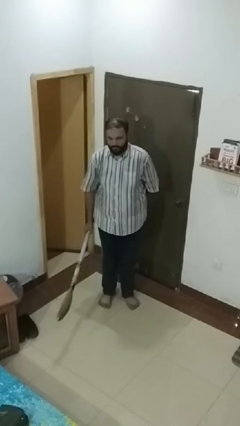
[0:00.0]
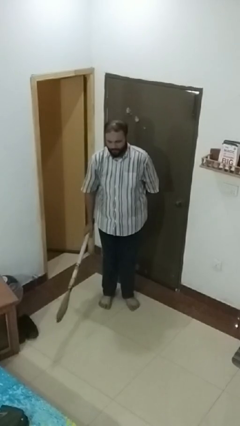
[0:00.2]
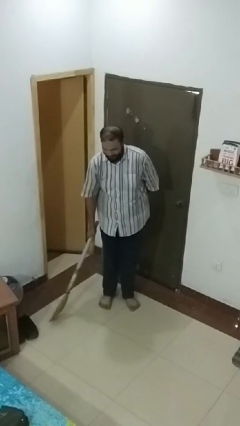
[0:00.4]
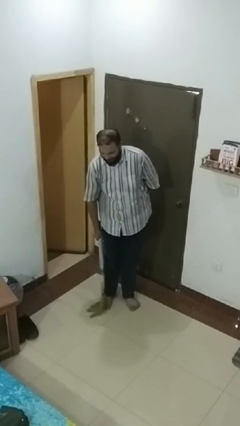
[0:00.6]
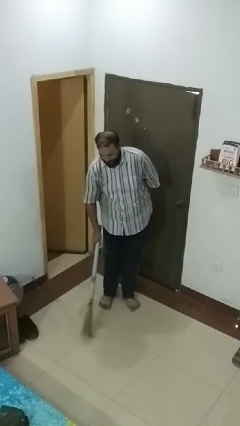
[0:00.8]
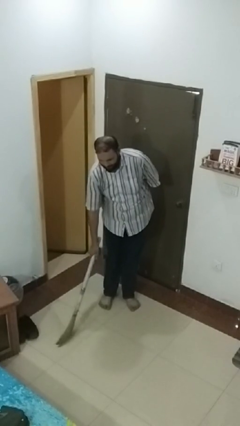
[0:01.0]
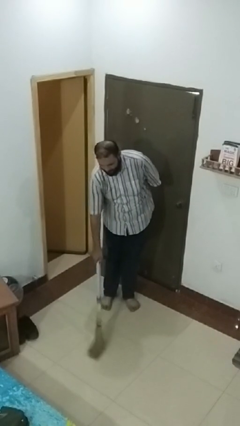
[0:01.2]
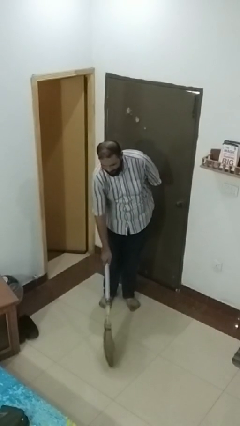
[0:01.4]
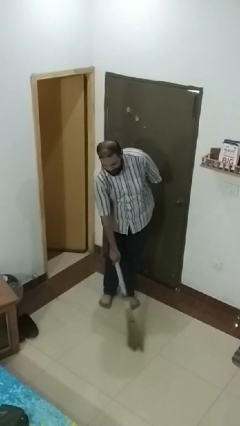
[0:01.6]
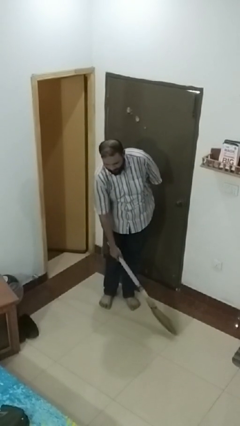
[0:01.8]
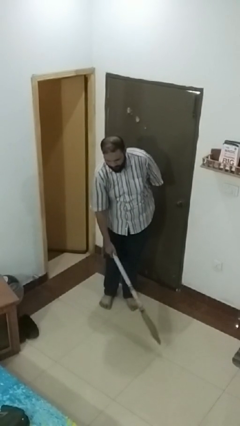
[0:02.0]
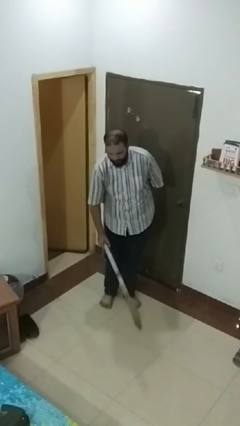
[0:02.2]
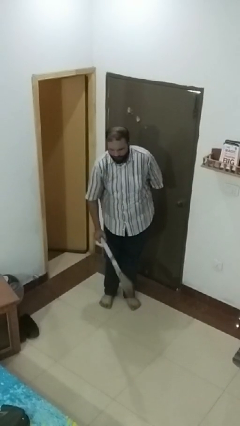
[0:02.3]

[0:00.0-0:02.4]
person sweeps floor

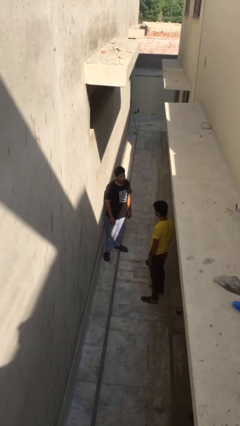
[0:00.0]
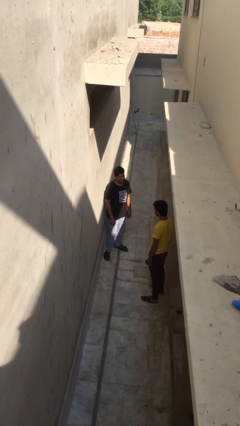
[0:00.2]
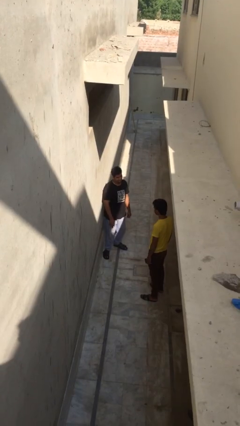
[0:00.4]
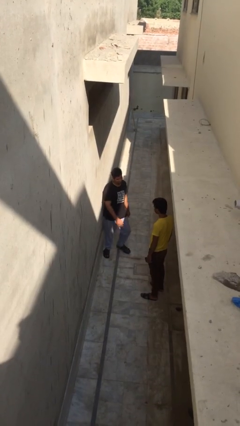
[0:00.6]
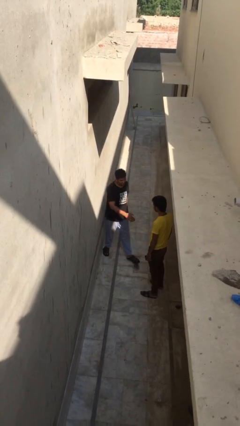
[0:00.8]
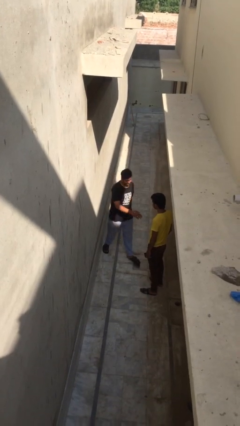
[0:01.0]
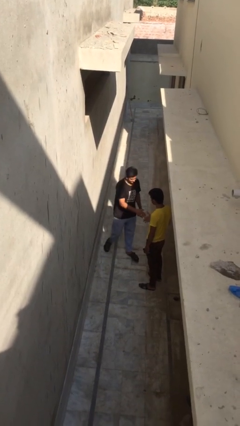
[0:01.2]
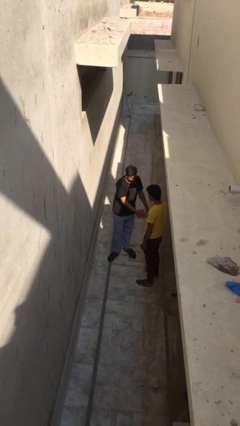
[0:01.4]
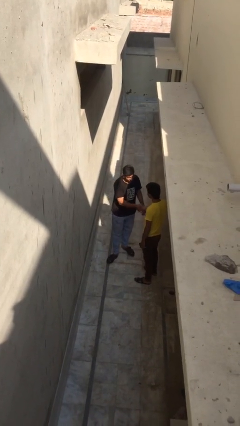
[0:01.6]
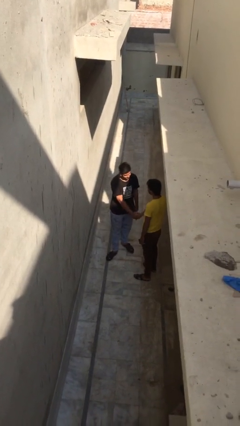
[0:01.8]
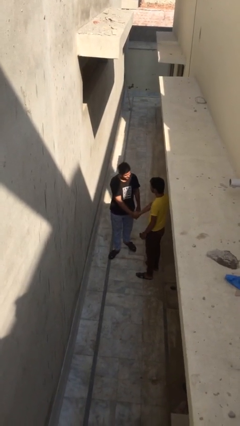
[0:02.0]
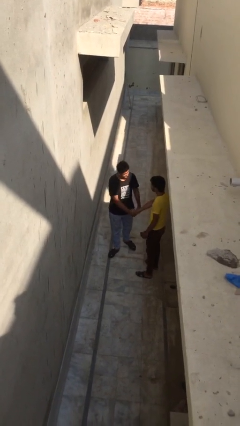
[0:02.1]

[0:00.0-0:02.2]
person shakes hand

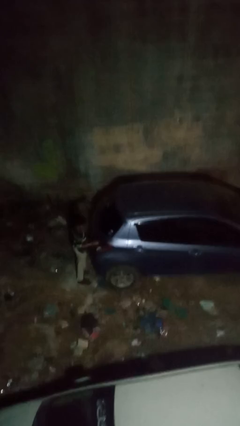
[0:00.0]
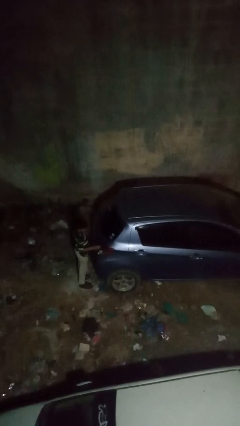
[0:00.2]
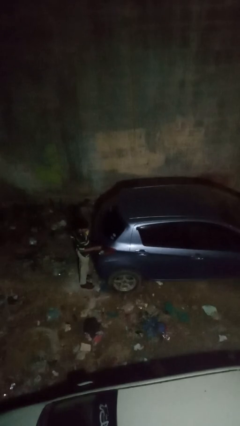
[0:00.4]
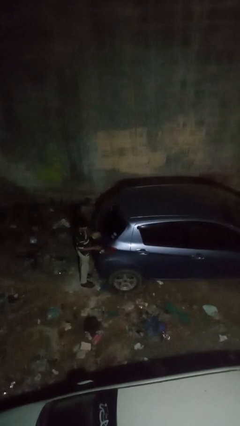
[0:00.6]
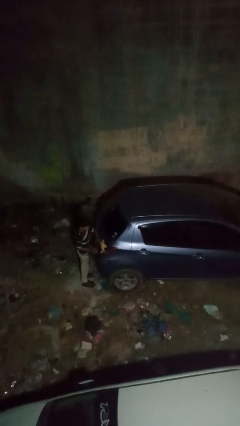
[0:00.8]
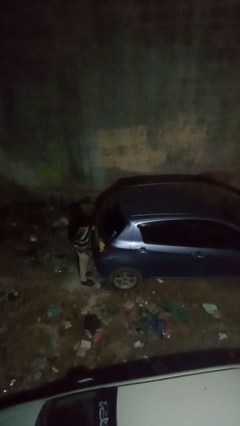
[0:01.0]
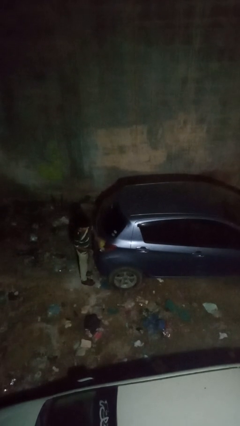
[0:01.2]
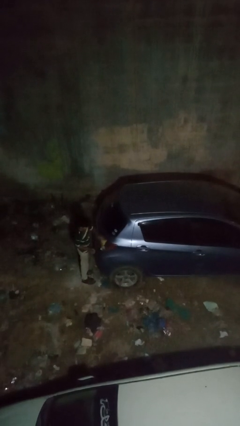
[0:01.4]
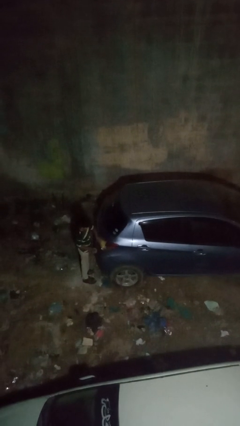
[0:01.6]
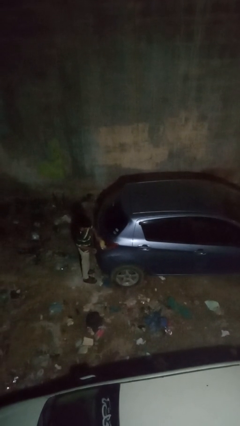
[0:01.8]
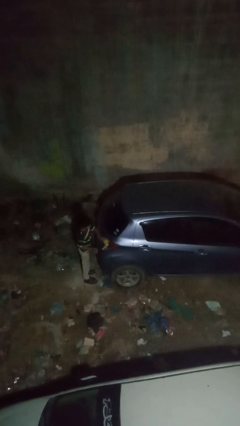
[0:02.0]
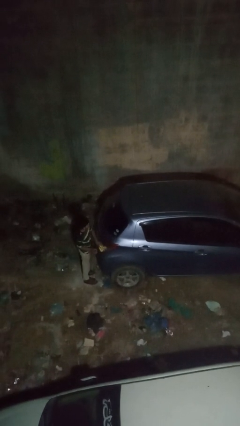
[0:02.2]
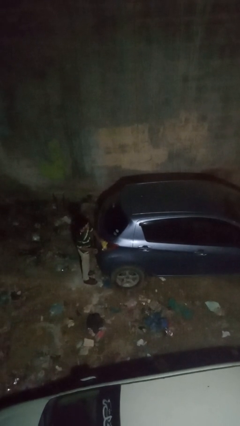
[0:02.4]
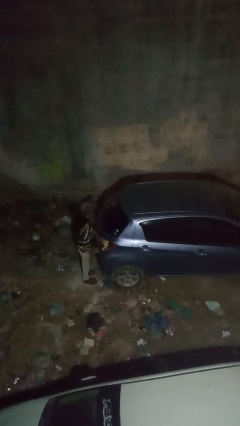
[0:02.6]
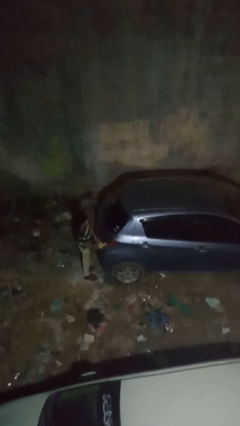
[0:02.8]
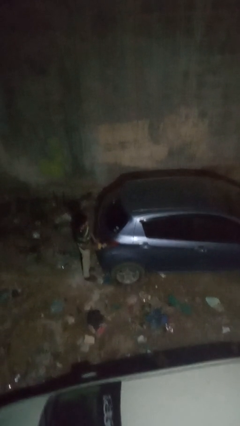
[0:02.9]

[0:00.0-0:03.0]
person polishes car with rag

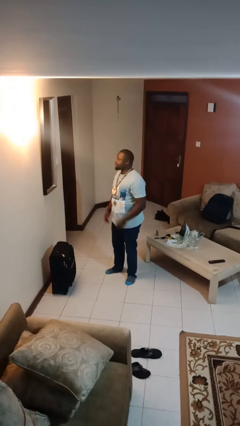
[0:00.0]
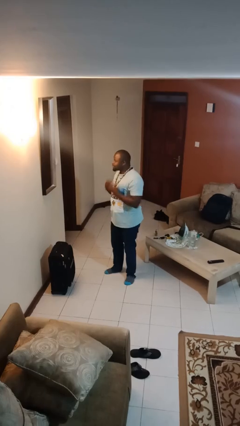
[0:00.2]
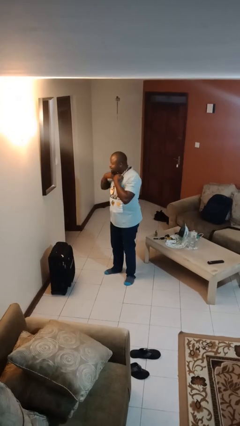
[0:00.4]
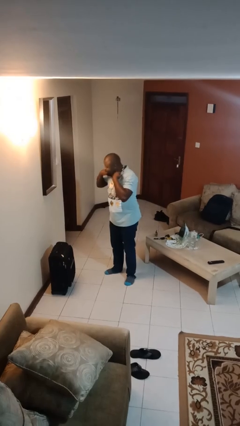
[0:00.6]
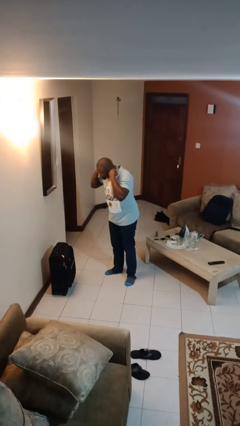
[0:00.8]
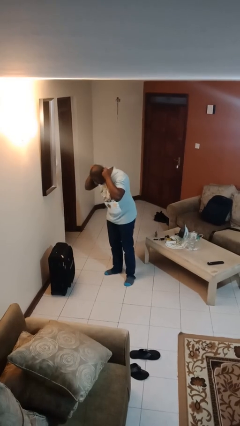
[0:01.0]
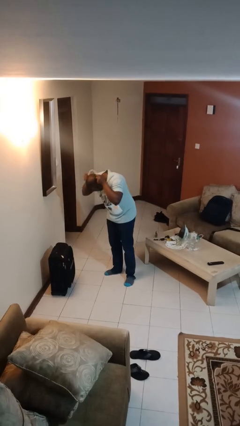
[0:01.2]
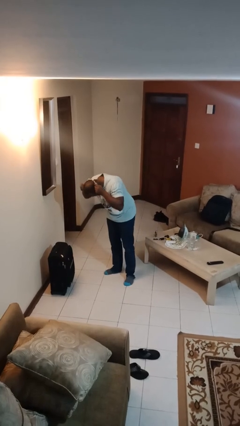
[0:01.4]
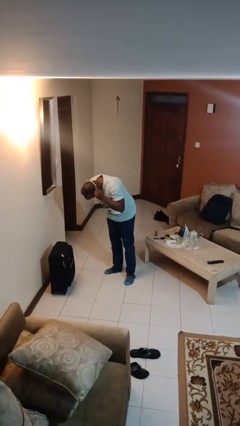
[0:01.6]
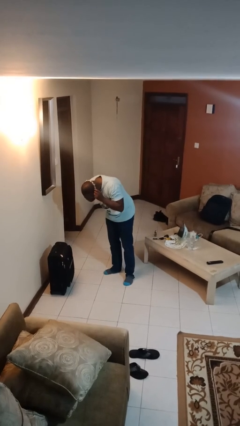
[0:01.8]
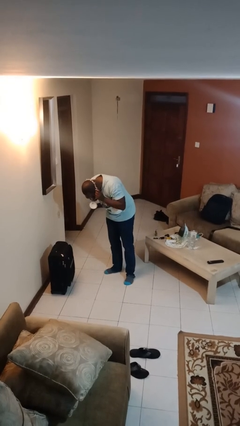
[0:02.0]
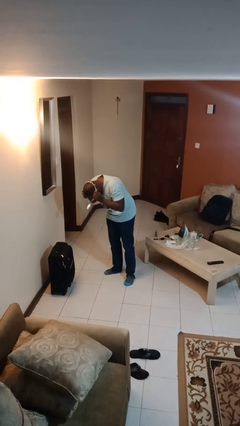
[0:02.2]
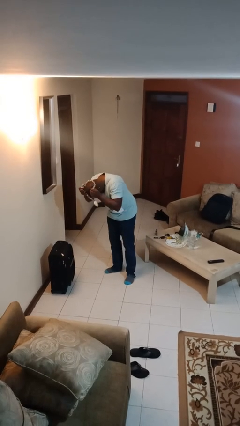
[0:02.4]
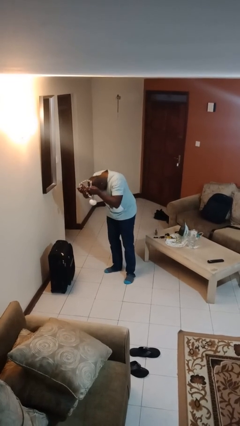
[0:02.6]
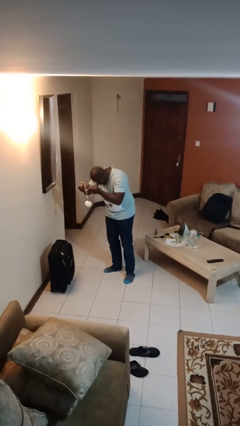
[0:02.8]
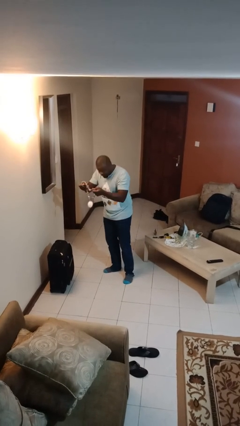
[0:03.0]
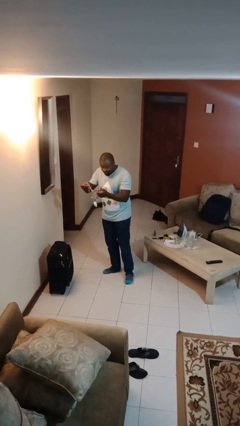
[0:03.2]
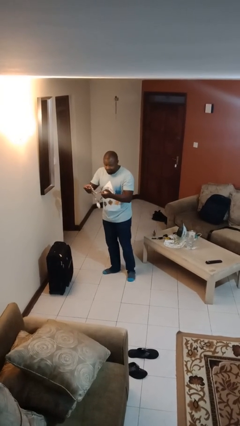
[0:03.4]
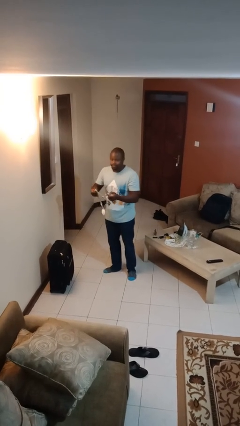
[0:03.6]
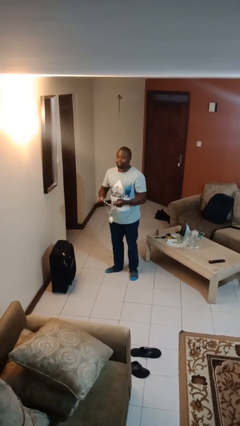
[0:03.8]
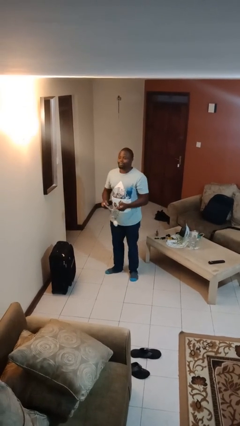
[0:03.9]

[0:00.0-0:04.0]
person takes off necklace

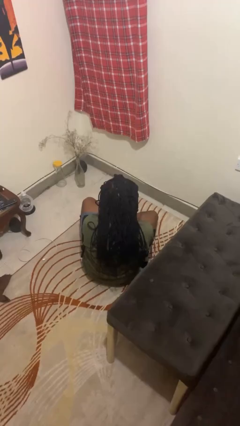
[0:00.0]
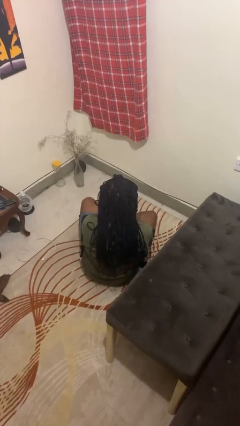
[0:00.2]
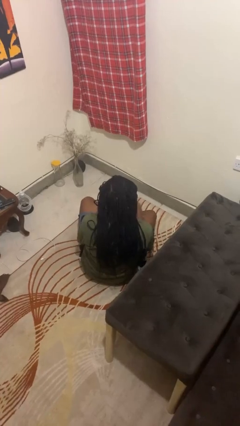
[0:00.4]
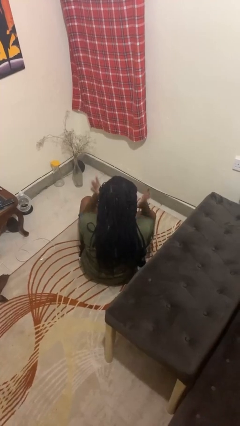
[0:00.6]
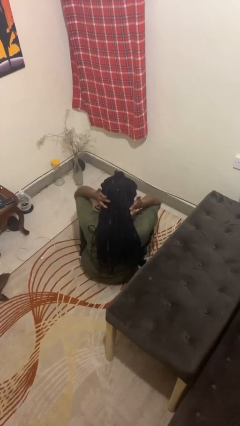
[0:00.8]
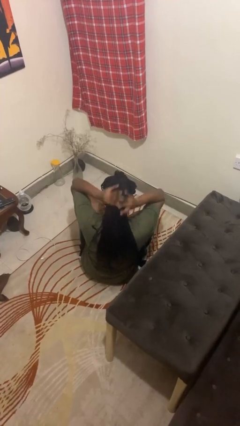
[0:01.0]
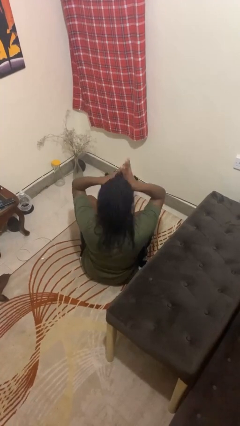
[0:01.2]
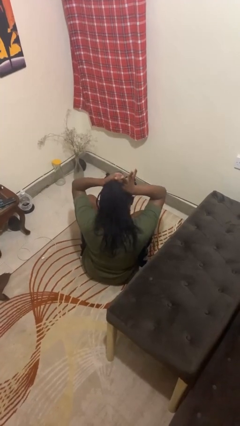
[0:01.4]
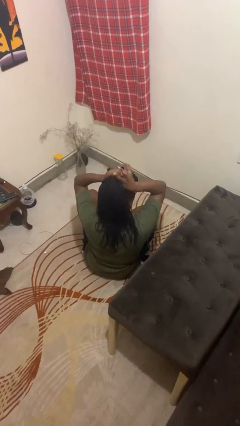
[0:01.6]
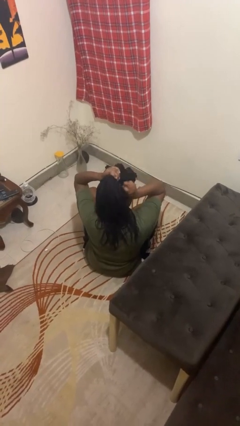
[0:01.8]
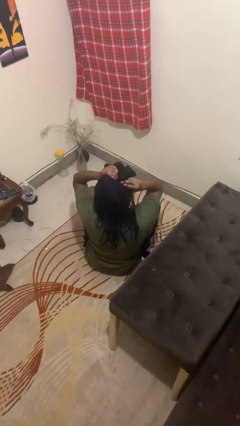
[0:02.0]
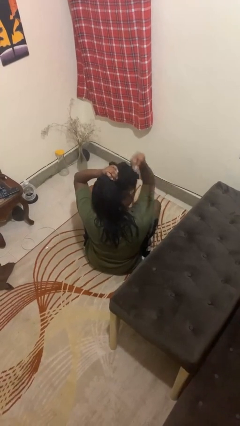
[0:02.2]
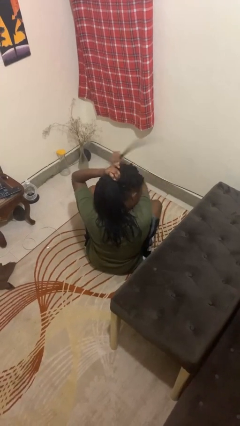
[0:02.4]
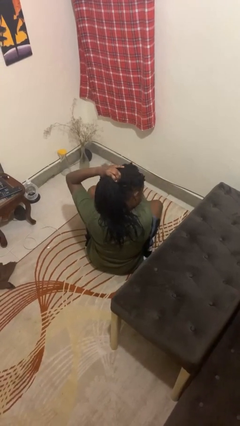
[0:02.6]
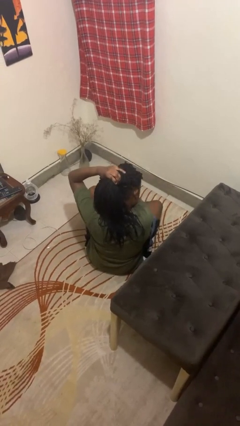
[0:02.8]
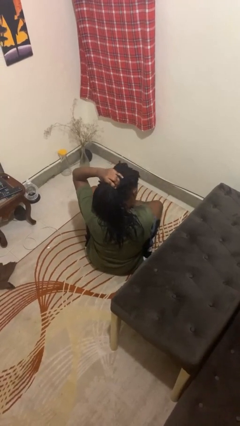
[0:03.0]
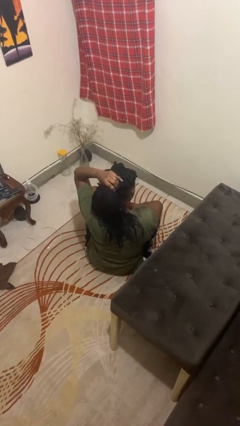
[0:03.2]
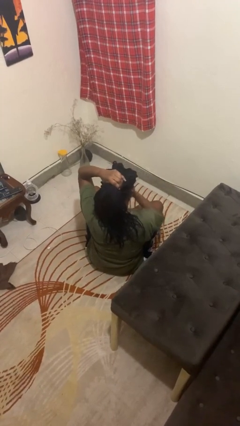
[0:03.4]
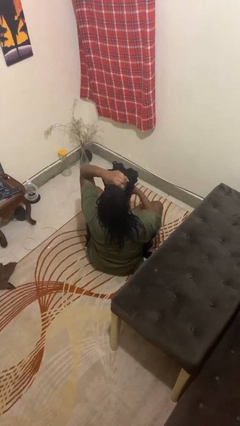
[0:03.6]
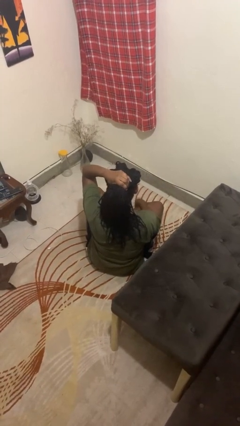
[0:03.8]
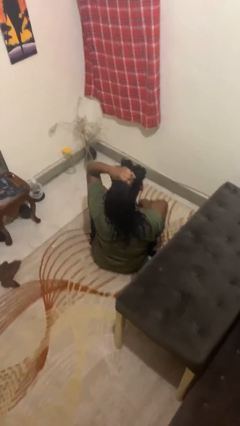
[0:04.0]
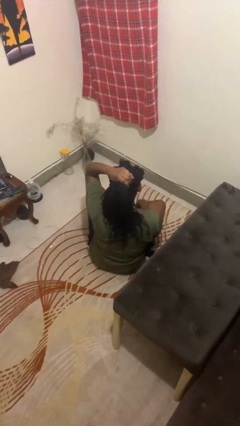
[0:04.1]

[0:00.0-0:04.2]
person puts hair in ponytail

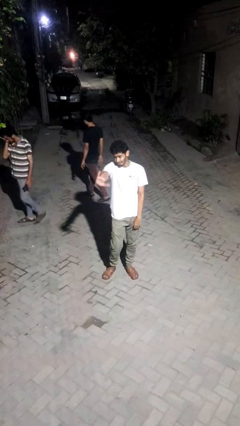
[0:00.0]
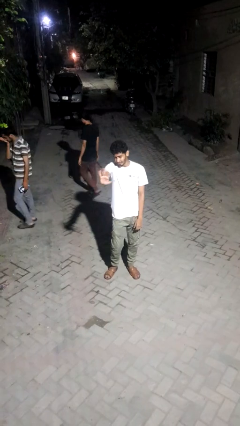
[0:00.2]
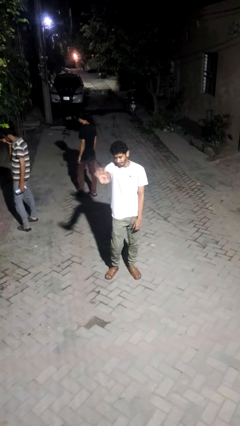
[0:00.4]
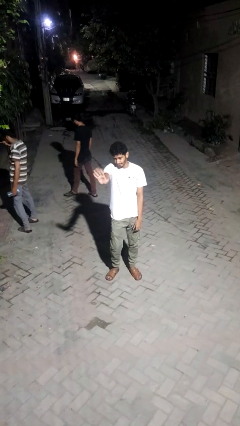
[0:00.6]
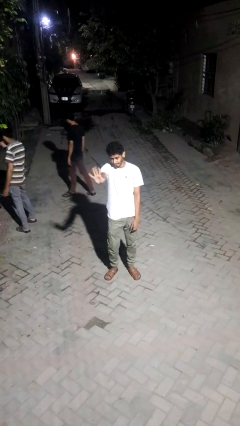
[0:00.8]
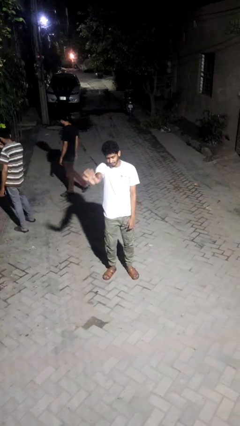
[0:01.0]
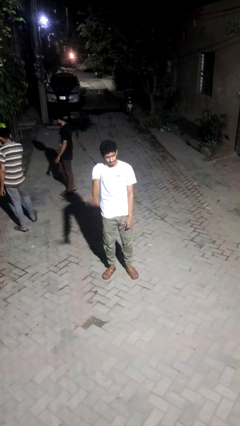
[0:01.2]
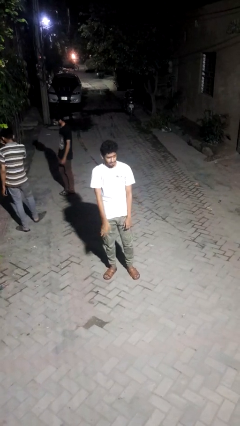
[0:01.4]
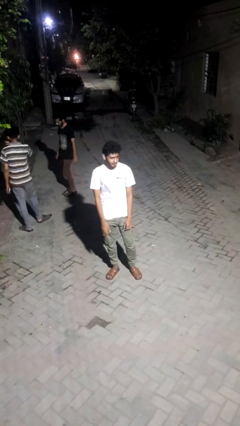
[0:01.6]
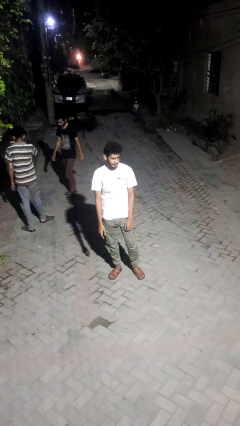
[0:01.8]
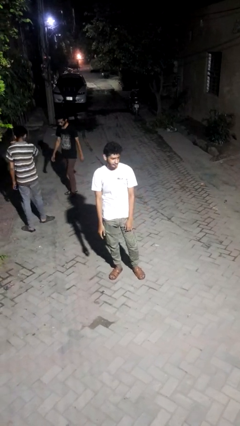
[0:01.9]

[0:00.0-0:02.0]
person waves at person
